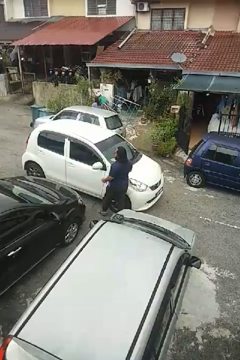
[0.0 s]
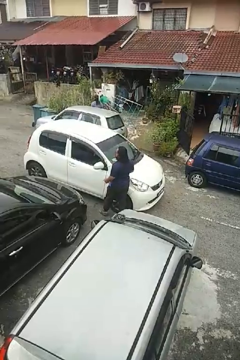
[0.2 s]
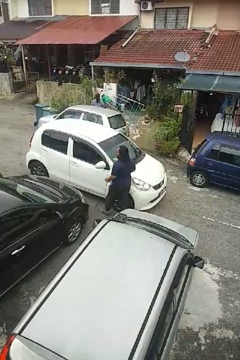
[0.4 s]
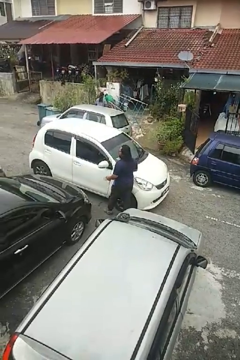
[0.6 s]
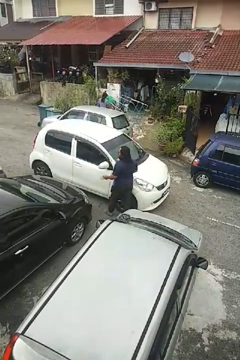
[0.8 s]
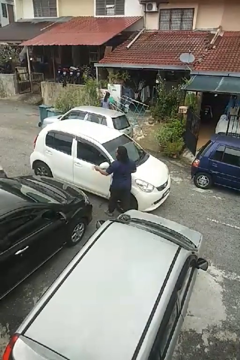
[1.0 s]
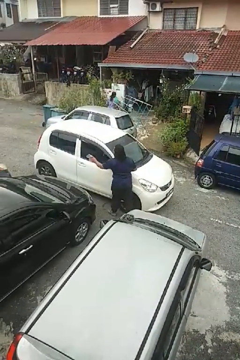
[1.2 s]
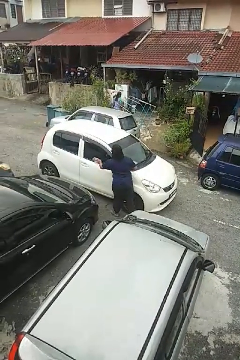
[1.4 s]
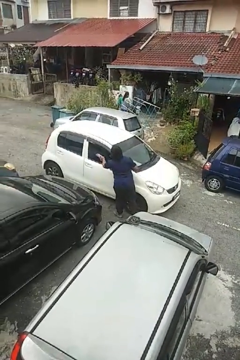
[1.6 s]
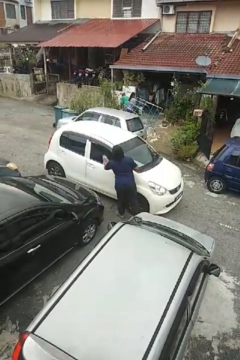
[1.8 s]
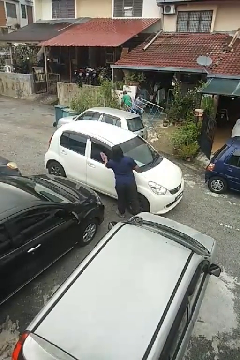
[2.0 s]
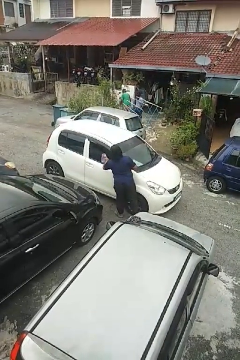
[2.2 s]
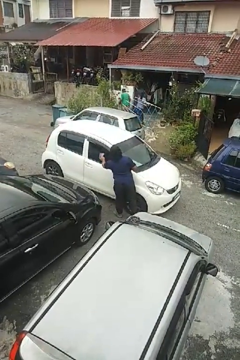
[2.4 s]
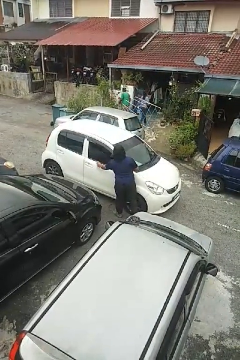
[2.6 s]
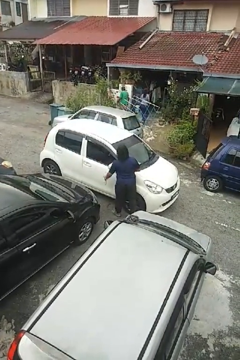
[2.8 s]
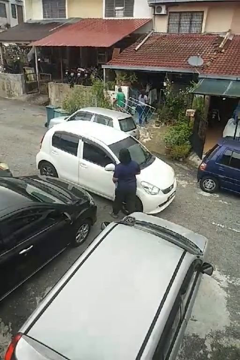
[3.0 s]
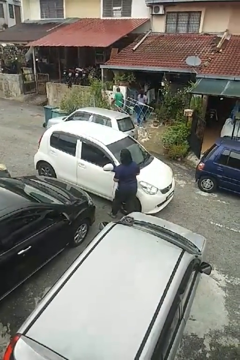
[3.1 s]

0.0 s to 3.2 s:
person polishes car with rag

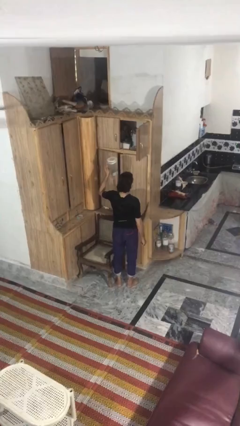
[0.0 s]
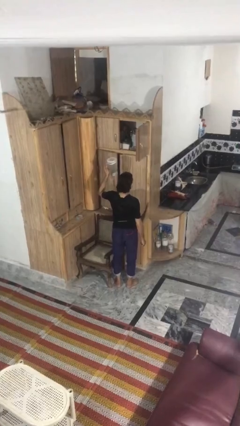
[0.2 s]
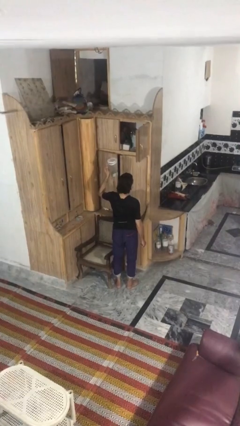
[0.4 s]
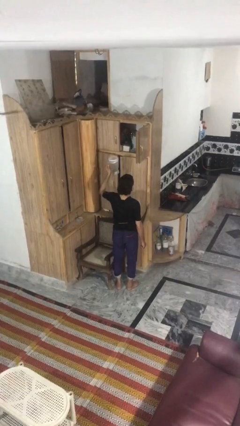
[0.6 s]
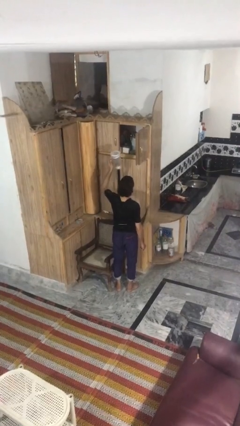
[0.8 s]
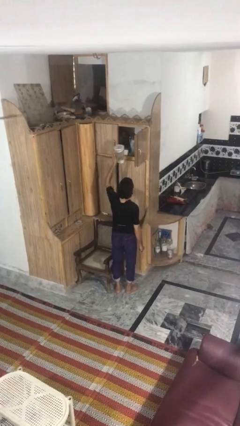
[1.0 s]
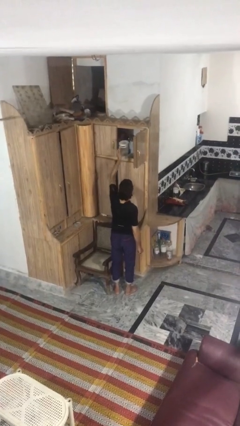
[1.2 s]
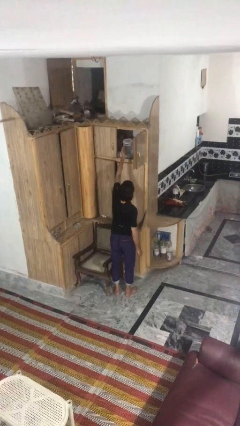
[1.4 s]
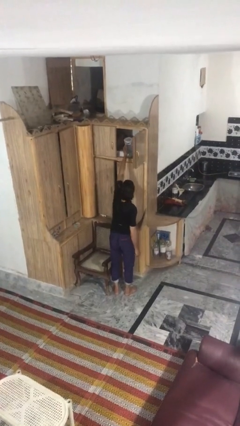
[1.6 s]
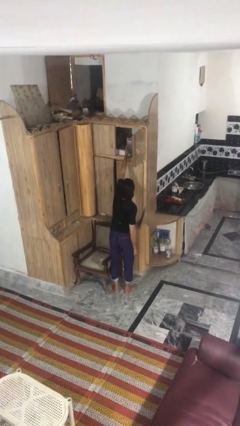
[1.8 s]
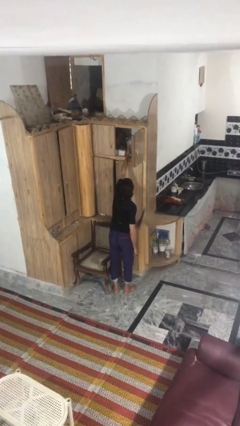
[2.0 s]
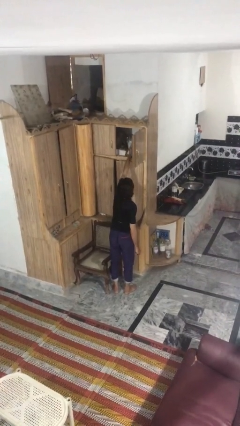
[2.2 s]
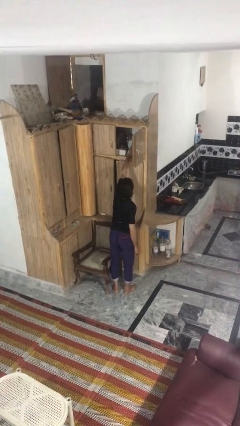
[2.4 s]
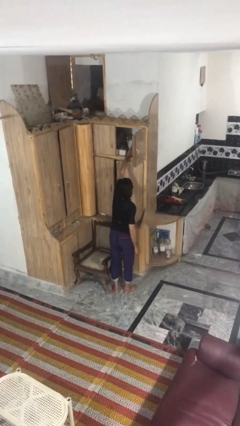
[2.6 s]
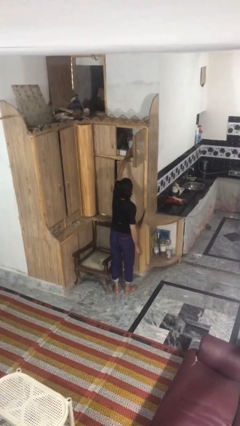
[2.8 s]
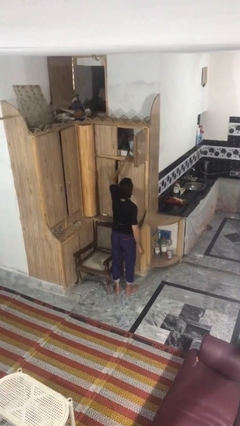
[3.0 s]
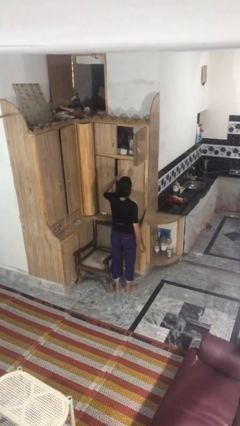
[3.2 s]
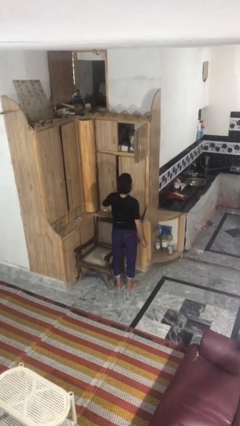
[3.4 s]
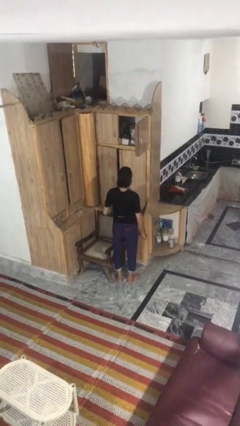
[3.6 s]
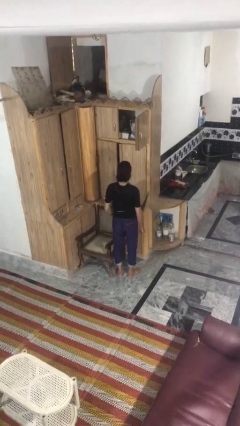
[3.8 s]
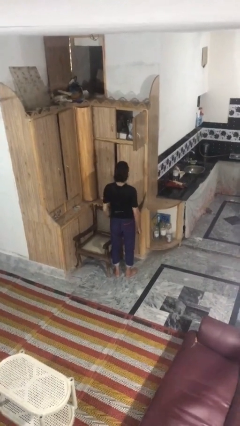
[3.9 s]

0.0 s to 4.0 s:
person puts down object on shelf

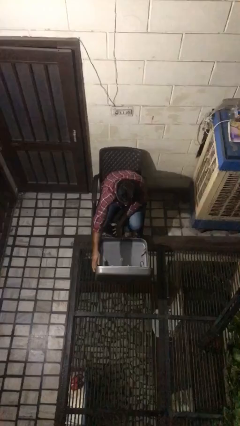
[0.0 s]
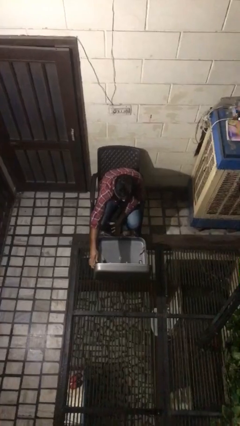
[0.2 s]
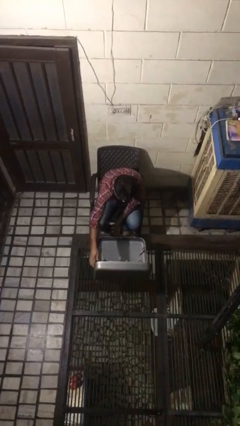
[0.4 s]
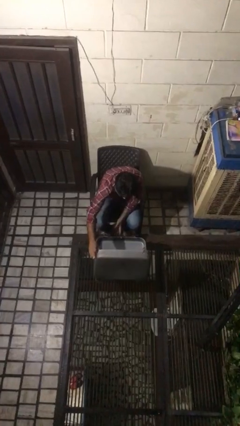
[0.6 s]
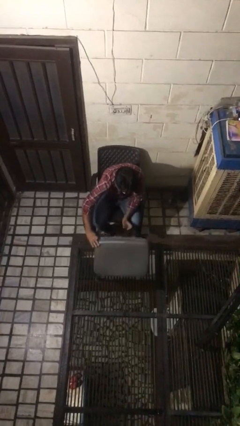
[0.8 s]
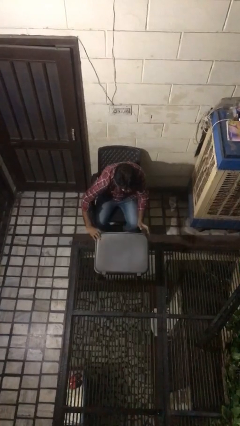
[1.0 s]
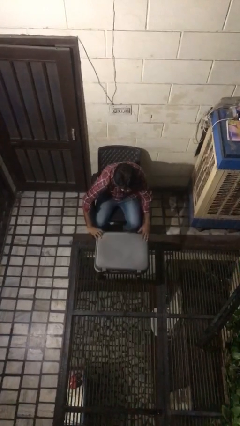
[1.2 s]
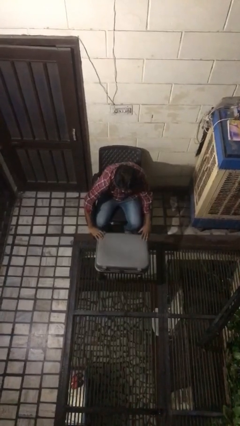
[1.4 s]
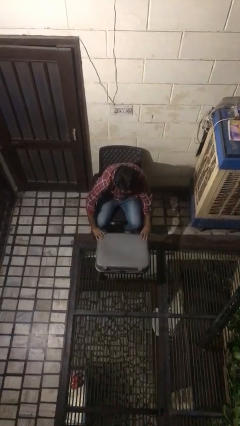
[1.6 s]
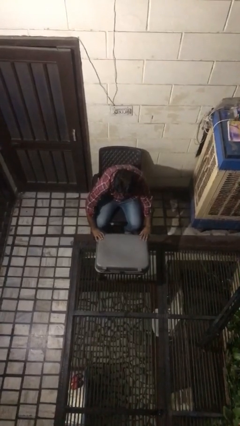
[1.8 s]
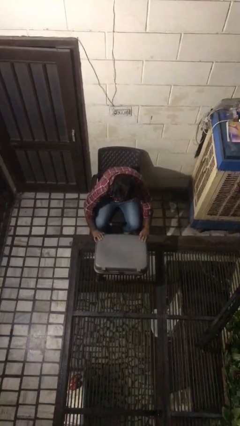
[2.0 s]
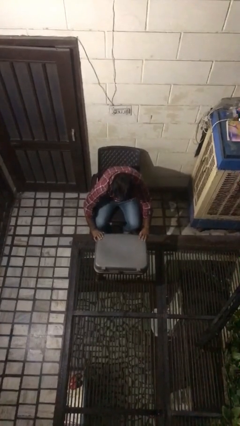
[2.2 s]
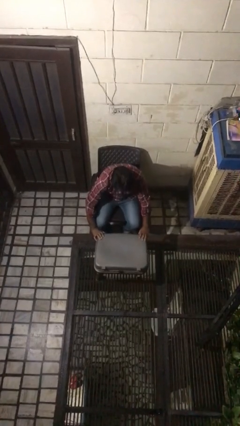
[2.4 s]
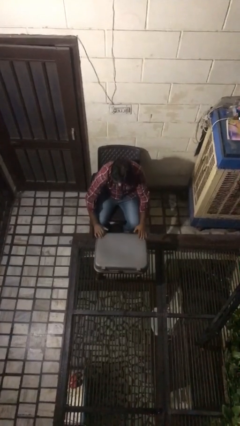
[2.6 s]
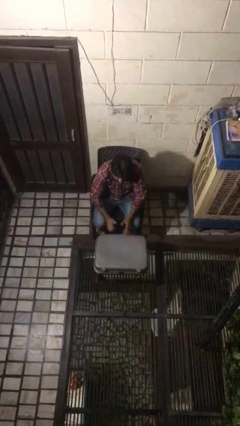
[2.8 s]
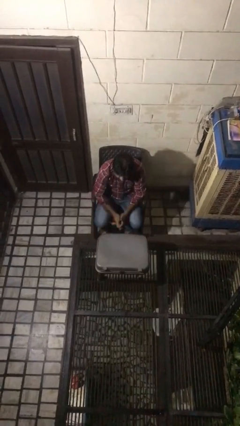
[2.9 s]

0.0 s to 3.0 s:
person closes suitcase

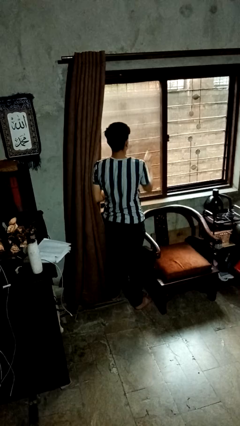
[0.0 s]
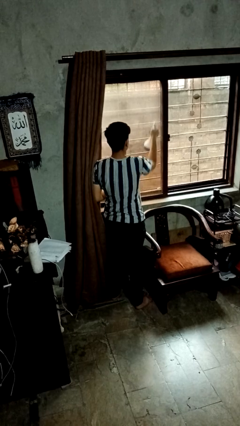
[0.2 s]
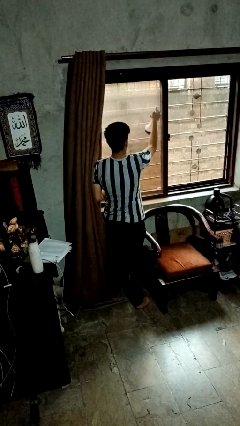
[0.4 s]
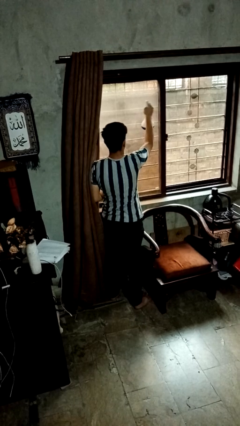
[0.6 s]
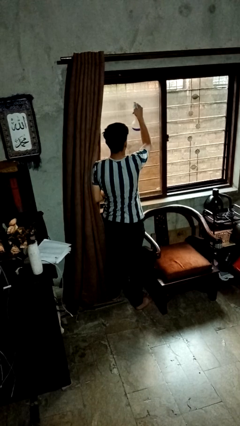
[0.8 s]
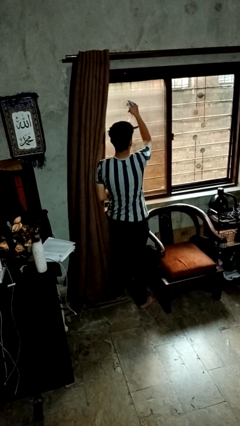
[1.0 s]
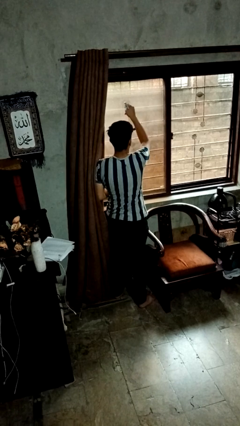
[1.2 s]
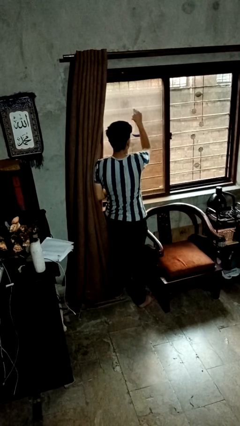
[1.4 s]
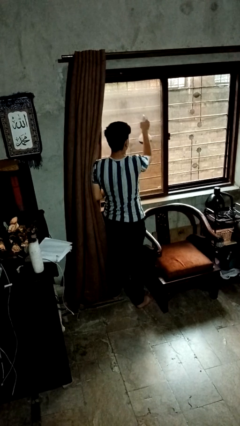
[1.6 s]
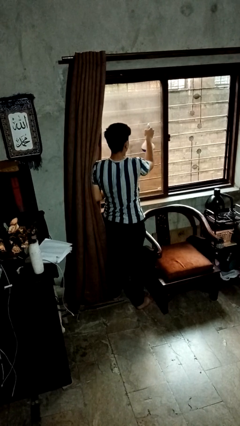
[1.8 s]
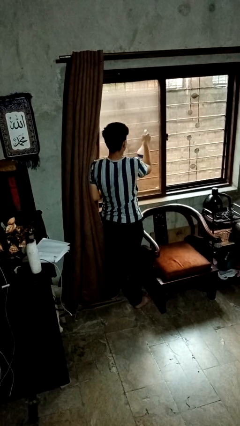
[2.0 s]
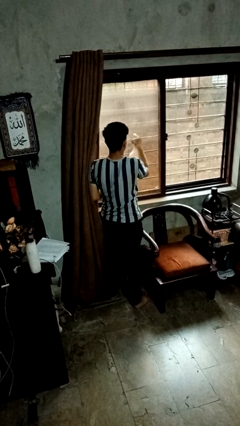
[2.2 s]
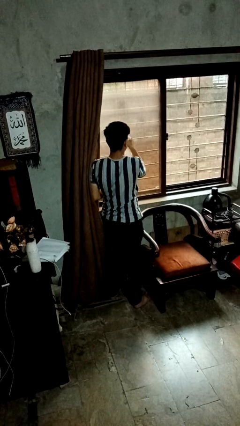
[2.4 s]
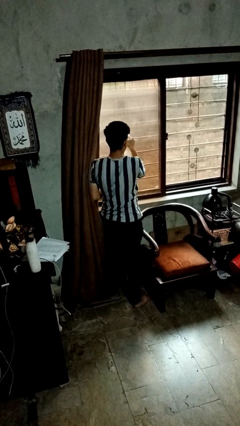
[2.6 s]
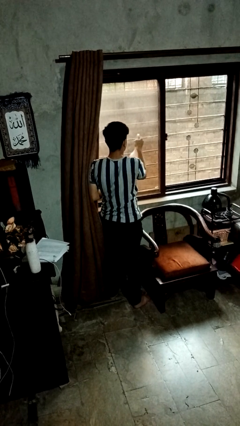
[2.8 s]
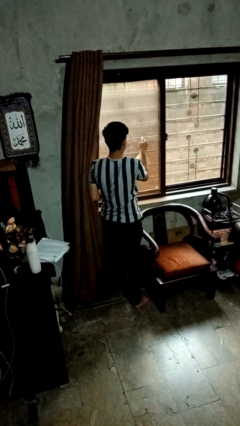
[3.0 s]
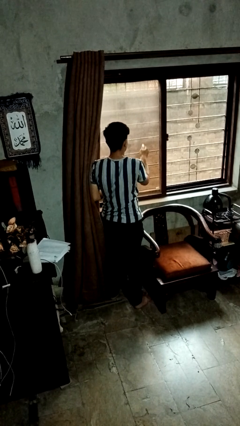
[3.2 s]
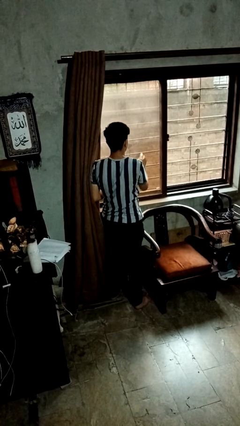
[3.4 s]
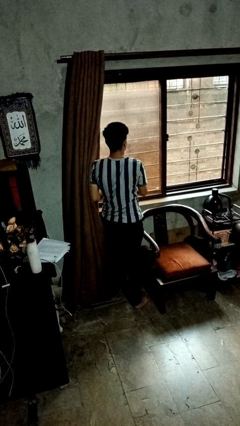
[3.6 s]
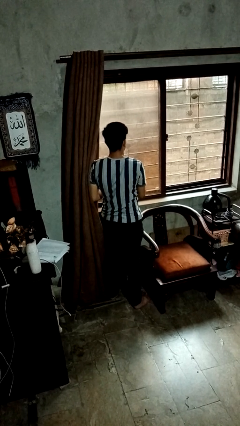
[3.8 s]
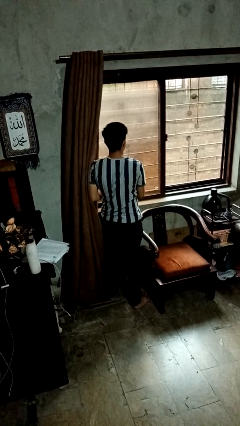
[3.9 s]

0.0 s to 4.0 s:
person sprays from bottle

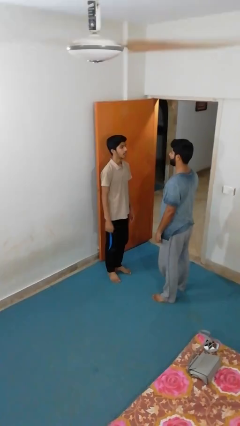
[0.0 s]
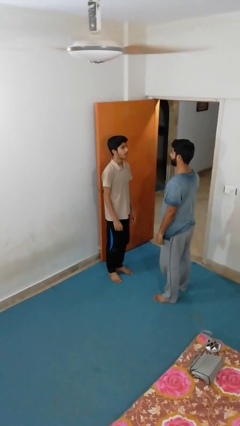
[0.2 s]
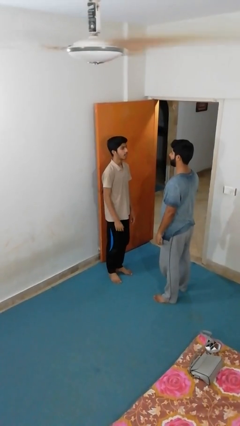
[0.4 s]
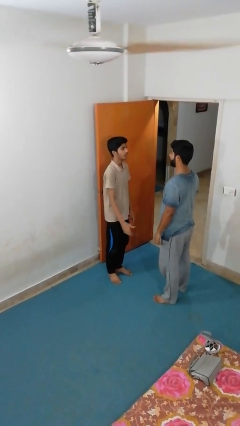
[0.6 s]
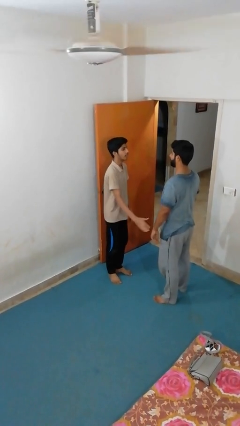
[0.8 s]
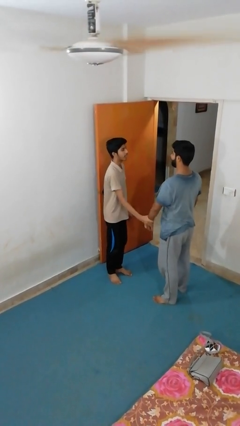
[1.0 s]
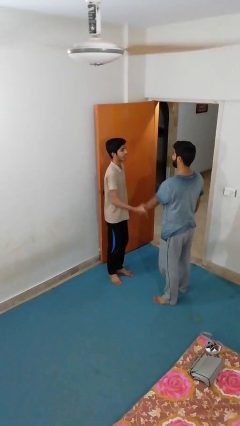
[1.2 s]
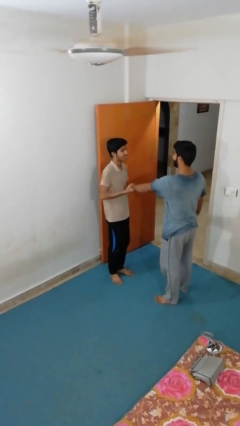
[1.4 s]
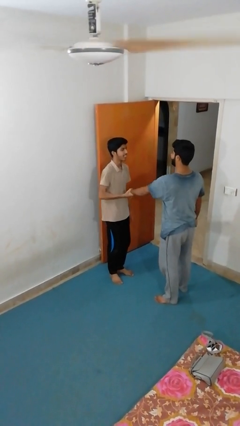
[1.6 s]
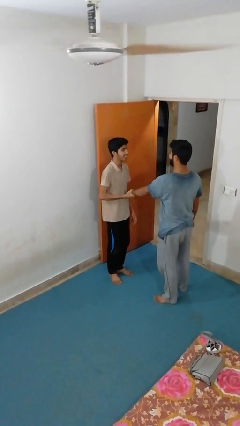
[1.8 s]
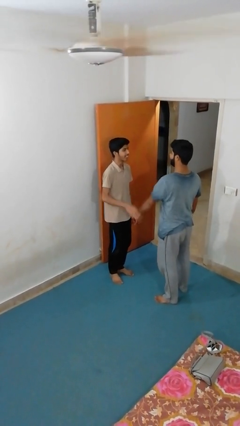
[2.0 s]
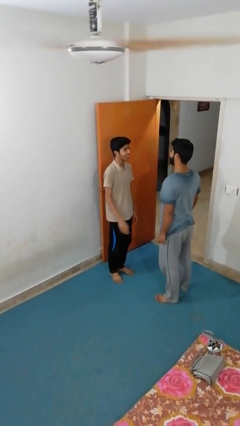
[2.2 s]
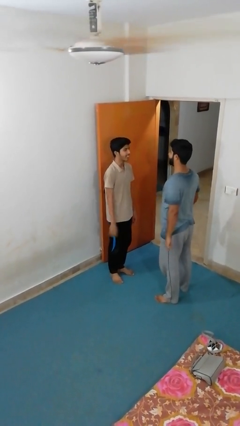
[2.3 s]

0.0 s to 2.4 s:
person grabs person by forearm

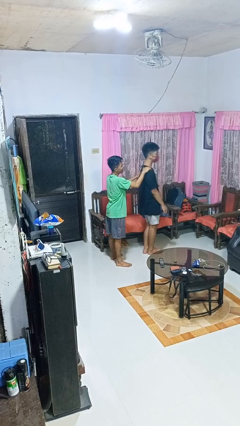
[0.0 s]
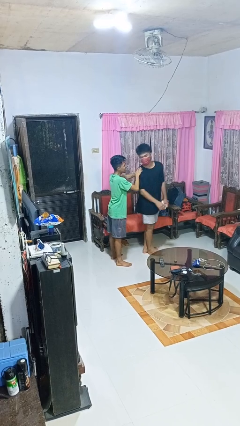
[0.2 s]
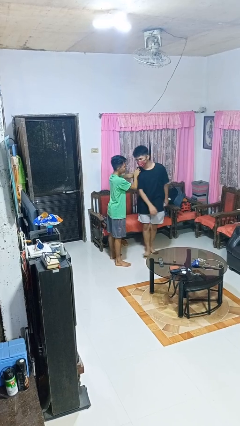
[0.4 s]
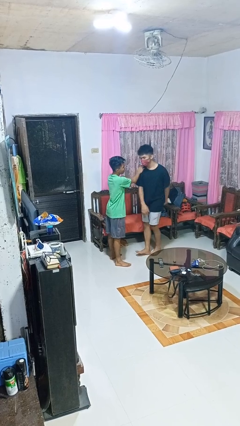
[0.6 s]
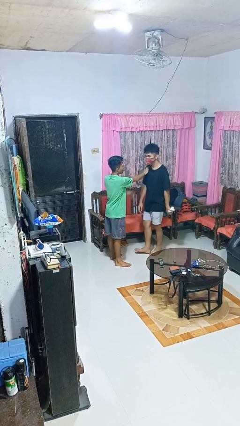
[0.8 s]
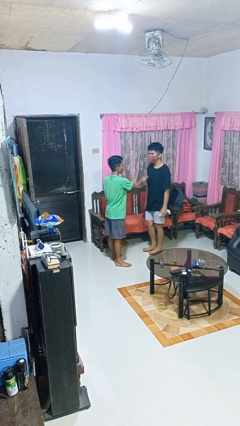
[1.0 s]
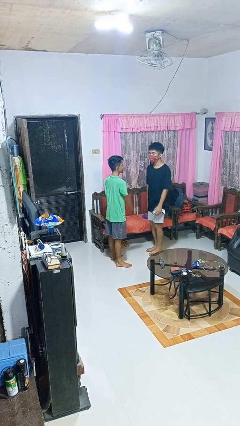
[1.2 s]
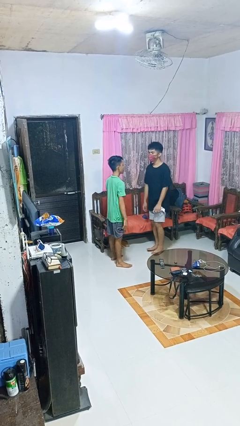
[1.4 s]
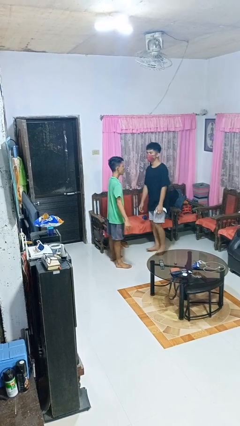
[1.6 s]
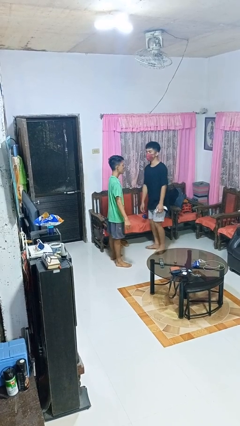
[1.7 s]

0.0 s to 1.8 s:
person spins person around
